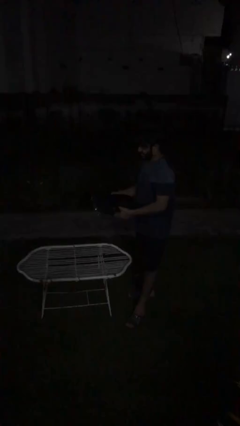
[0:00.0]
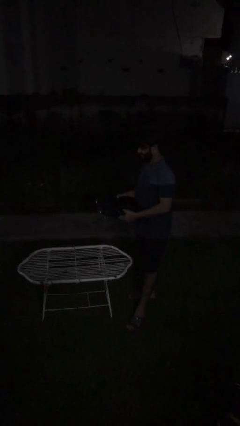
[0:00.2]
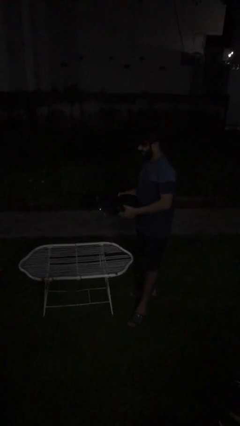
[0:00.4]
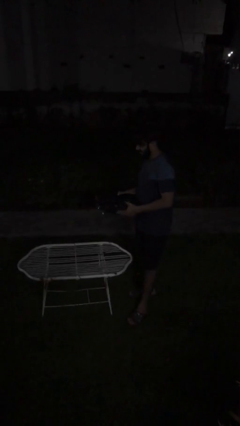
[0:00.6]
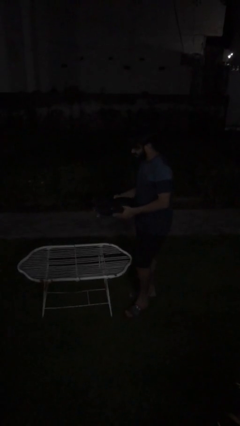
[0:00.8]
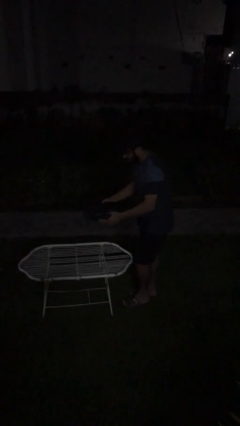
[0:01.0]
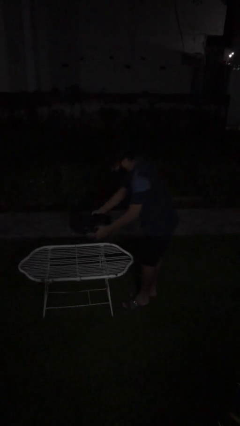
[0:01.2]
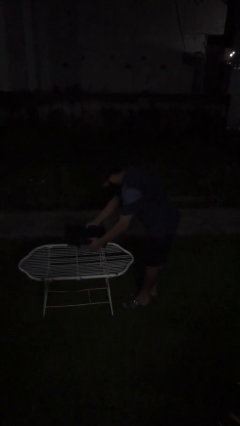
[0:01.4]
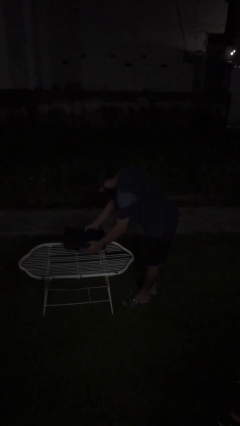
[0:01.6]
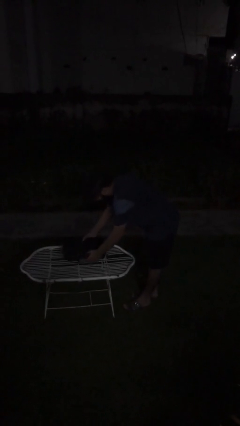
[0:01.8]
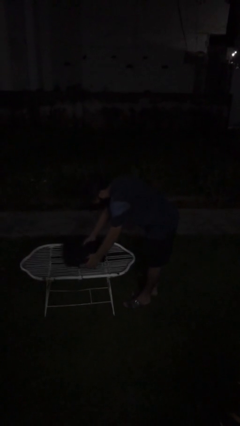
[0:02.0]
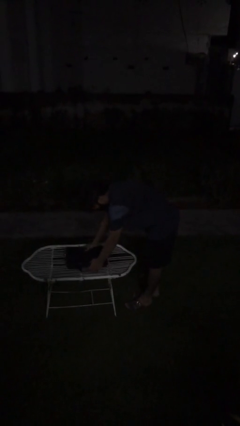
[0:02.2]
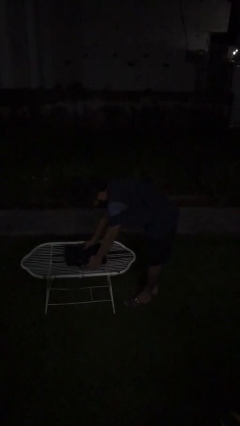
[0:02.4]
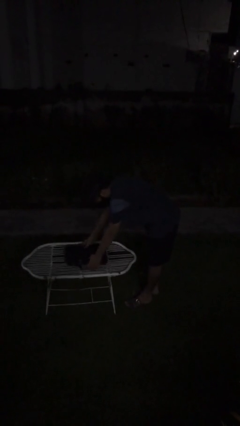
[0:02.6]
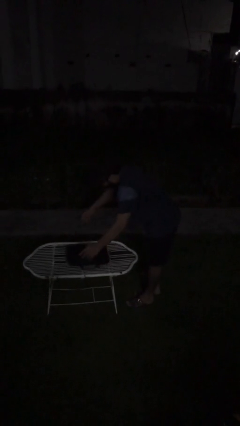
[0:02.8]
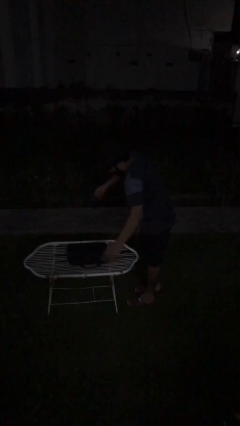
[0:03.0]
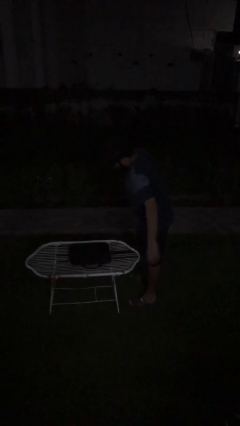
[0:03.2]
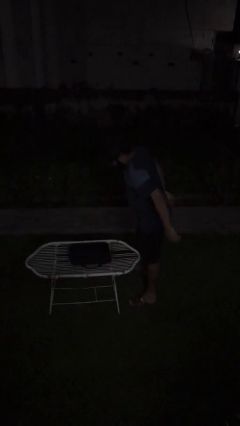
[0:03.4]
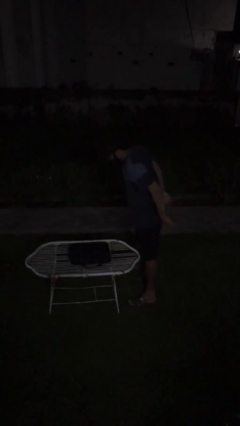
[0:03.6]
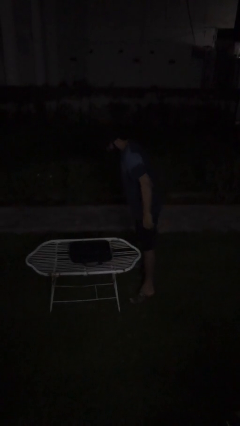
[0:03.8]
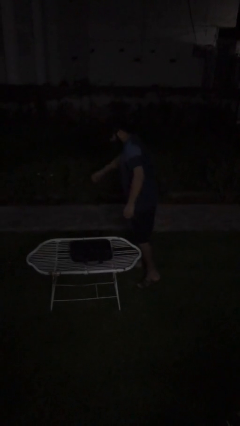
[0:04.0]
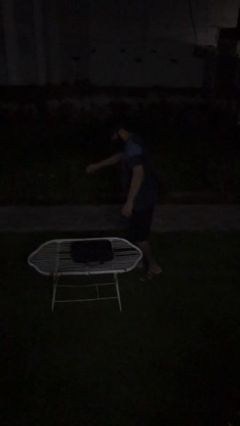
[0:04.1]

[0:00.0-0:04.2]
person puts down object on table

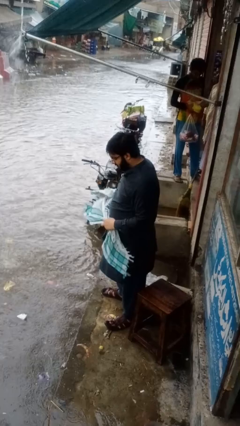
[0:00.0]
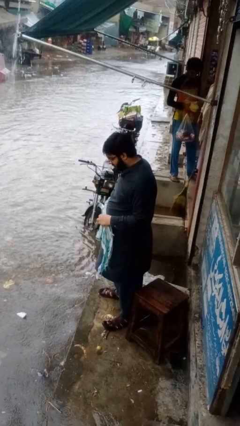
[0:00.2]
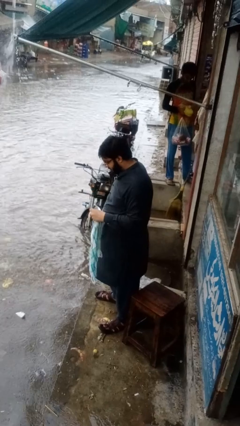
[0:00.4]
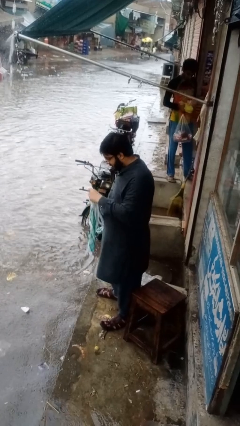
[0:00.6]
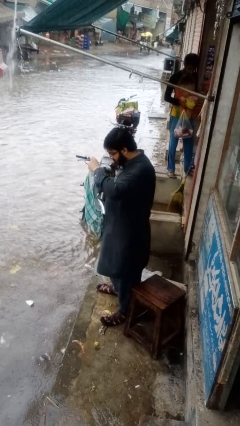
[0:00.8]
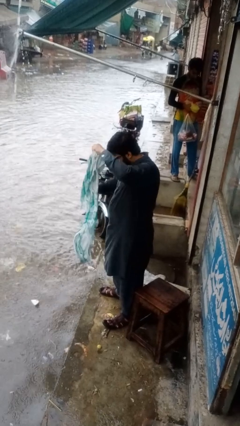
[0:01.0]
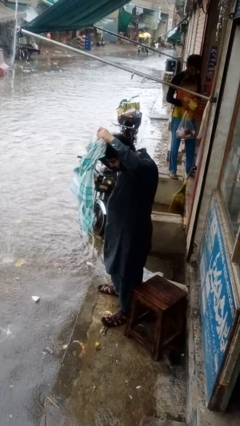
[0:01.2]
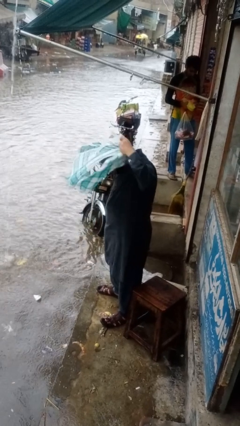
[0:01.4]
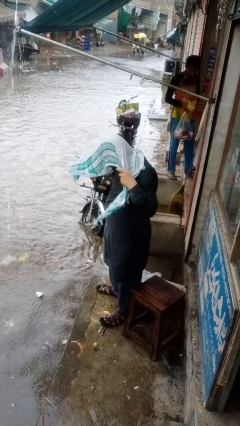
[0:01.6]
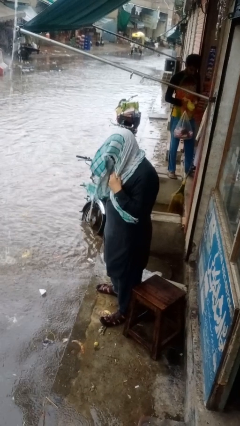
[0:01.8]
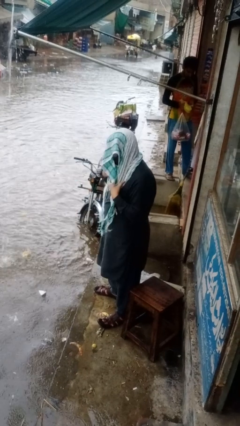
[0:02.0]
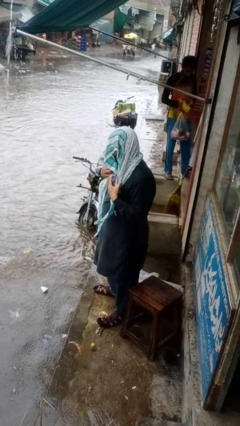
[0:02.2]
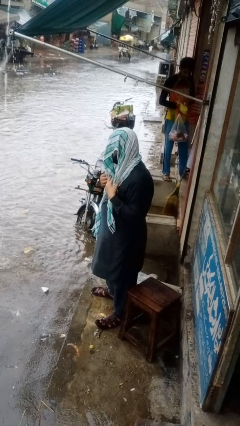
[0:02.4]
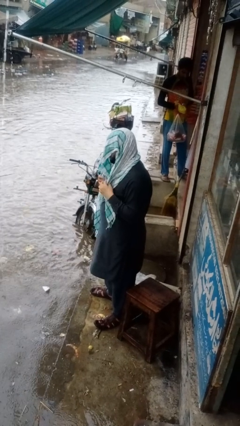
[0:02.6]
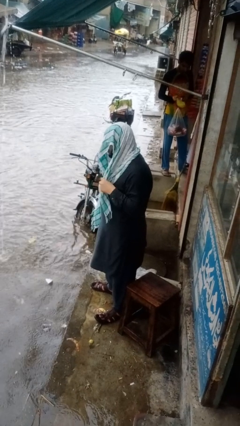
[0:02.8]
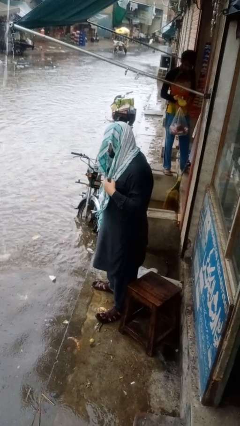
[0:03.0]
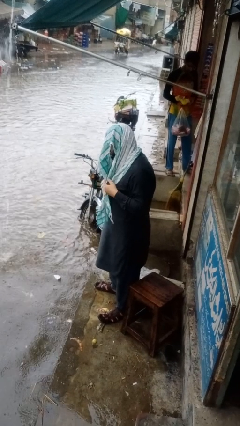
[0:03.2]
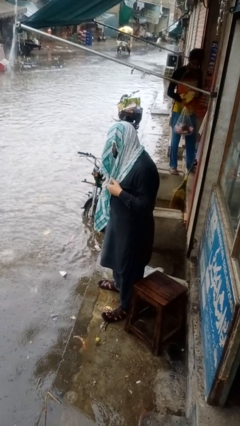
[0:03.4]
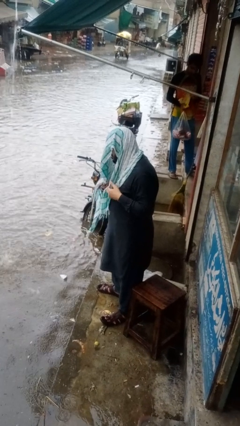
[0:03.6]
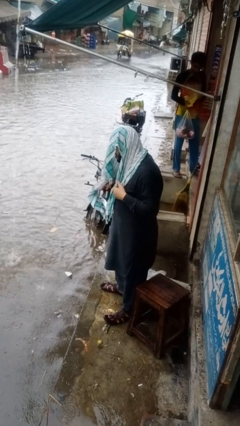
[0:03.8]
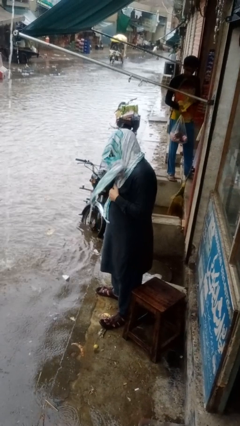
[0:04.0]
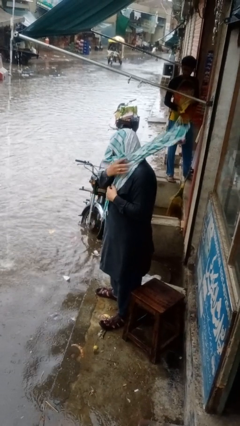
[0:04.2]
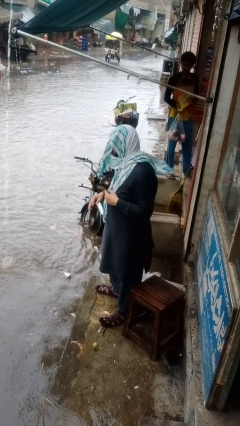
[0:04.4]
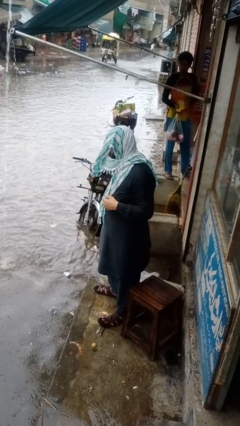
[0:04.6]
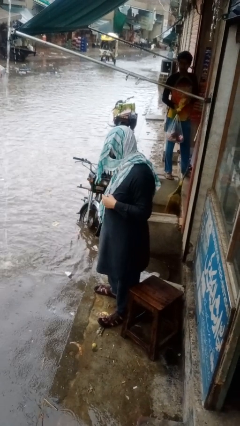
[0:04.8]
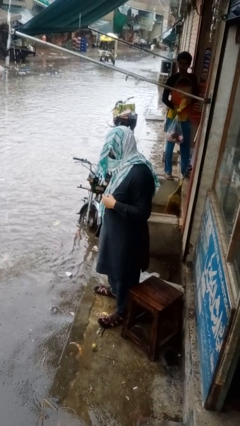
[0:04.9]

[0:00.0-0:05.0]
person puts on scarf

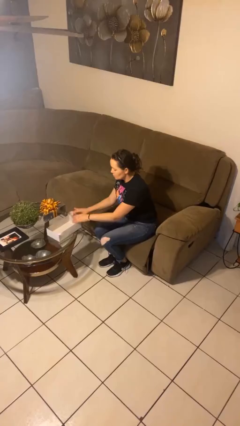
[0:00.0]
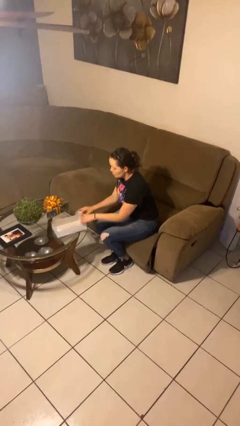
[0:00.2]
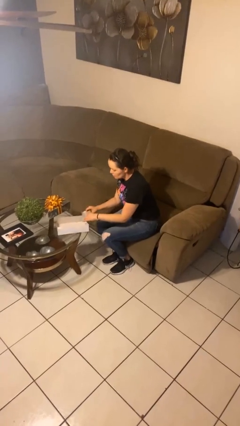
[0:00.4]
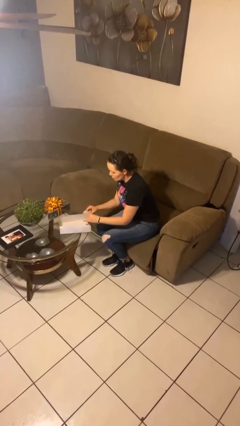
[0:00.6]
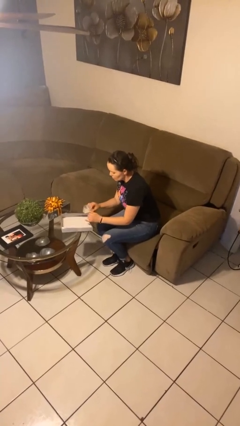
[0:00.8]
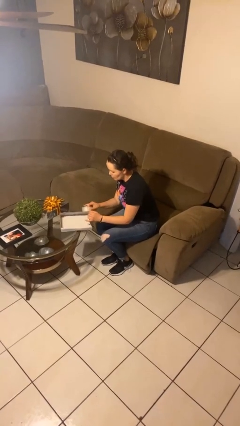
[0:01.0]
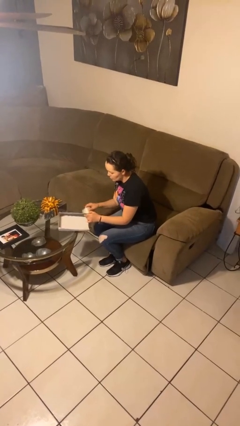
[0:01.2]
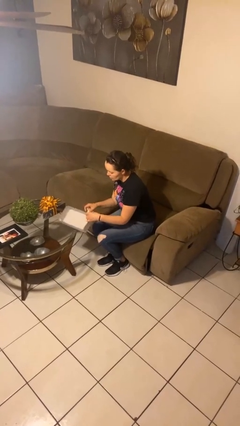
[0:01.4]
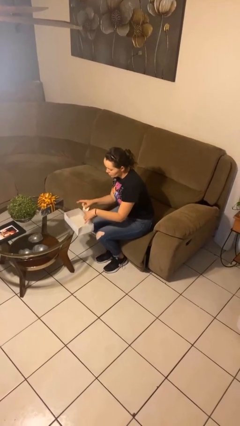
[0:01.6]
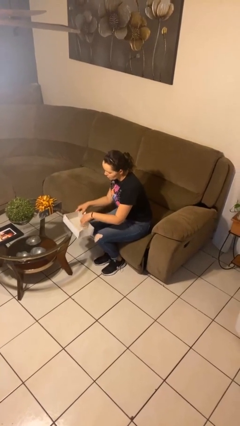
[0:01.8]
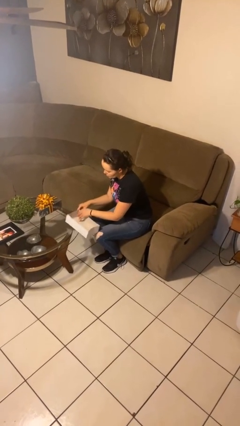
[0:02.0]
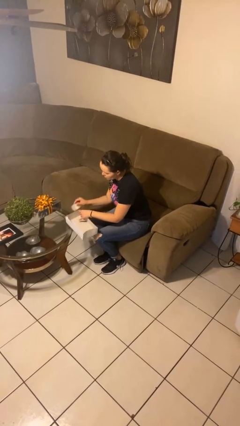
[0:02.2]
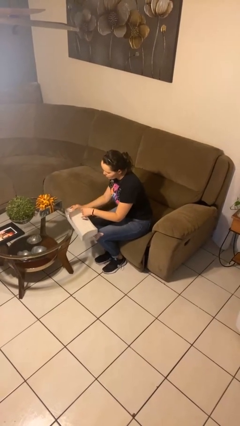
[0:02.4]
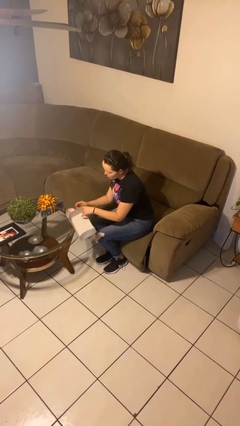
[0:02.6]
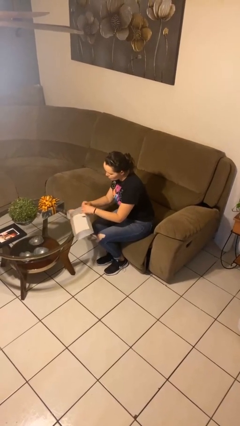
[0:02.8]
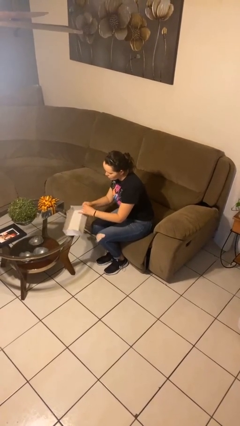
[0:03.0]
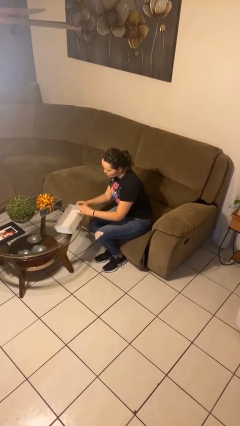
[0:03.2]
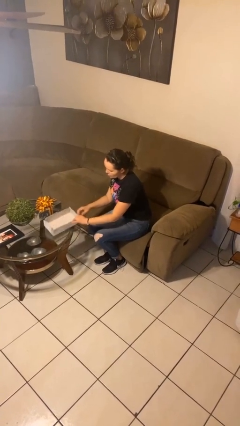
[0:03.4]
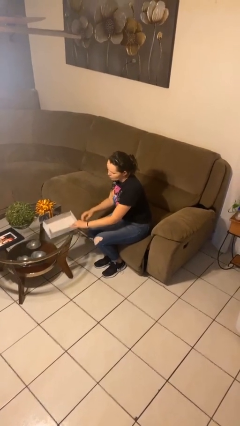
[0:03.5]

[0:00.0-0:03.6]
person wraps box

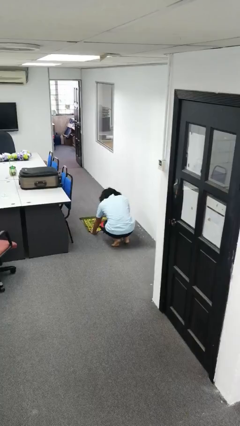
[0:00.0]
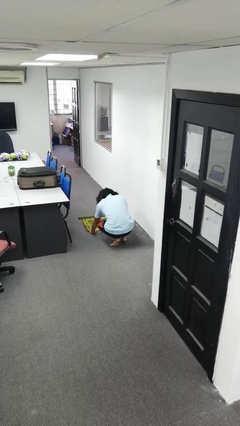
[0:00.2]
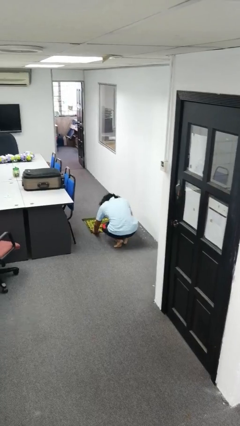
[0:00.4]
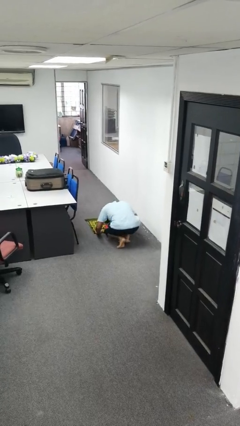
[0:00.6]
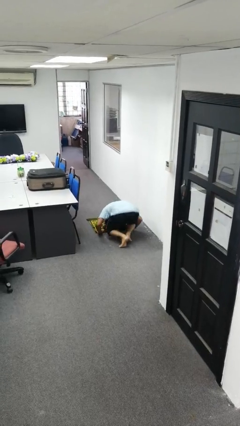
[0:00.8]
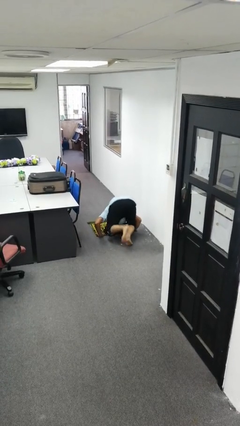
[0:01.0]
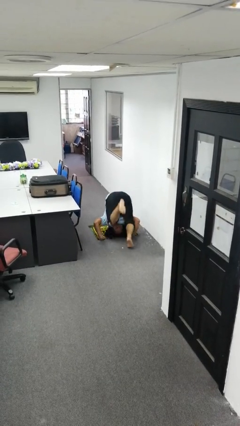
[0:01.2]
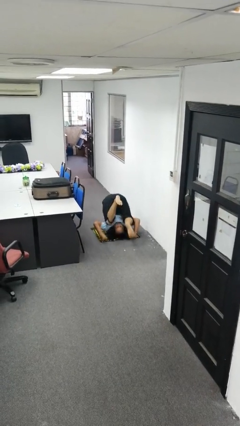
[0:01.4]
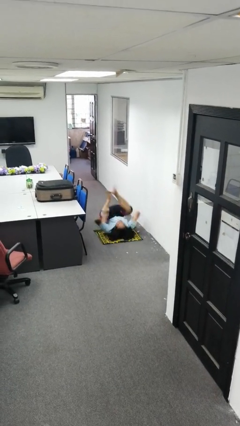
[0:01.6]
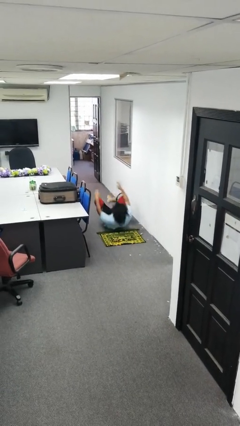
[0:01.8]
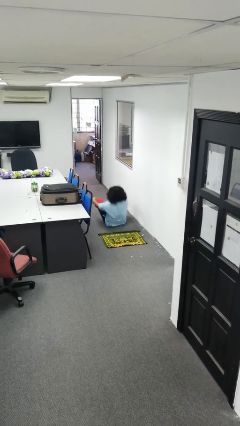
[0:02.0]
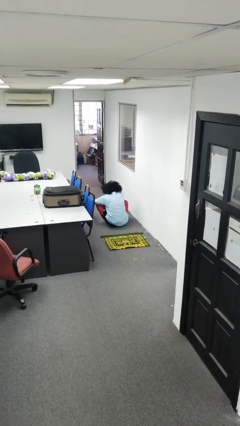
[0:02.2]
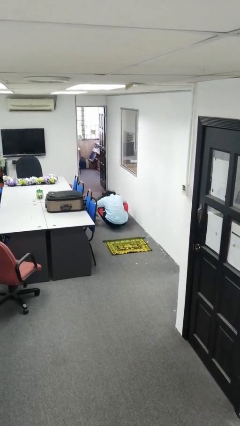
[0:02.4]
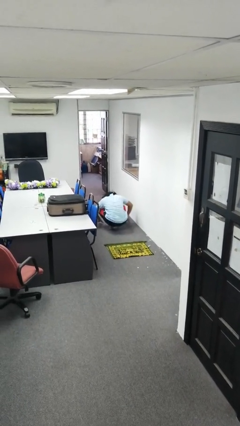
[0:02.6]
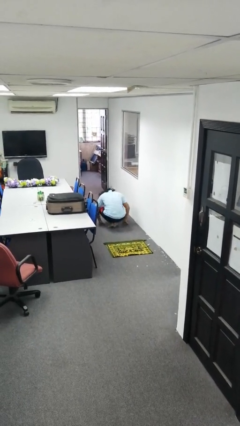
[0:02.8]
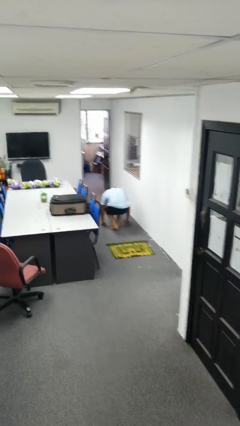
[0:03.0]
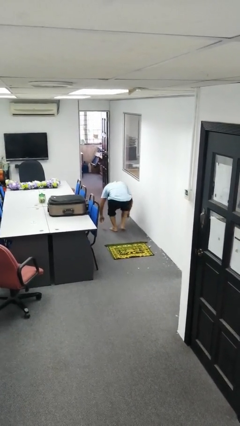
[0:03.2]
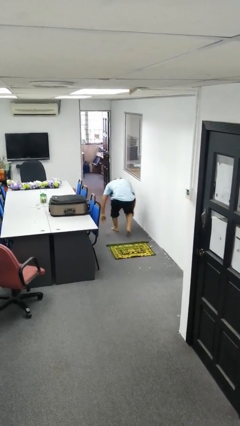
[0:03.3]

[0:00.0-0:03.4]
person somersaults

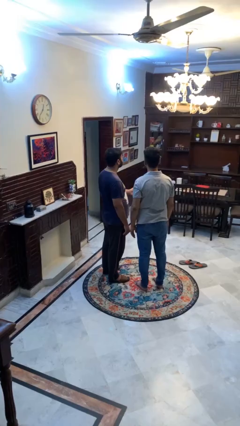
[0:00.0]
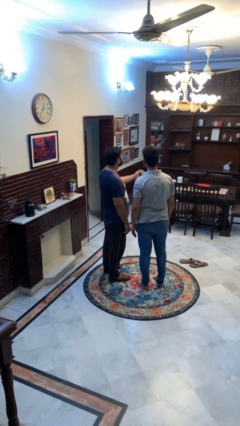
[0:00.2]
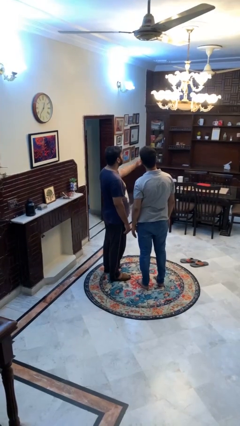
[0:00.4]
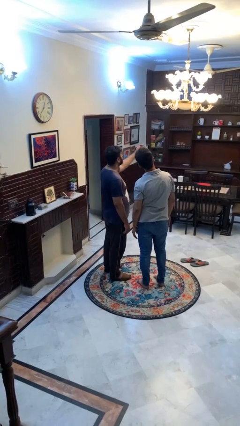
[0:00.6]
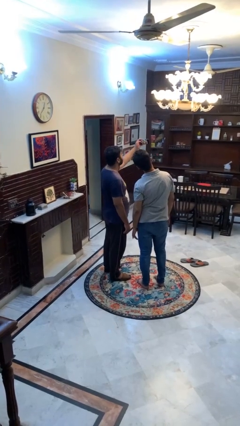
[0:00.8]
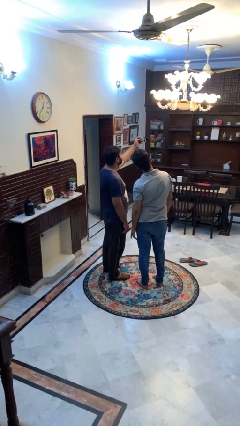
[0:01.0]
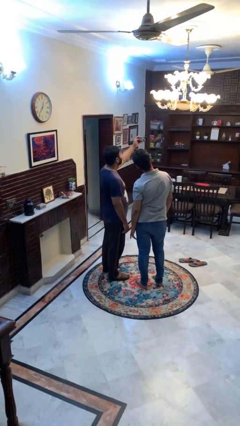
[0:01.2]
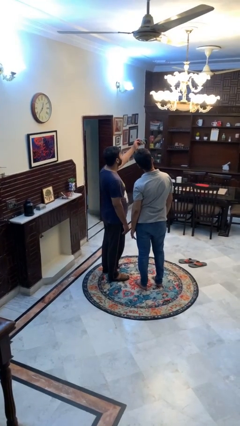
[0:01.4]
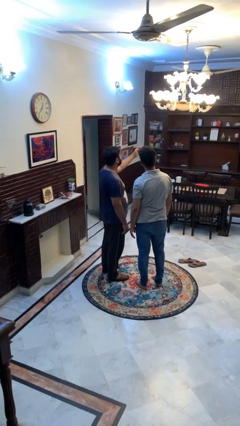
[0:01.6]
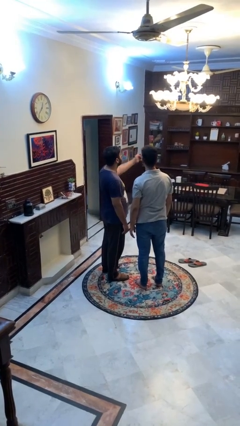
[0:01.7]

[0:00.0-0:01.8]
person takes selfie with person
